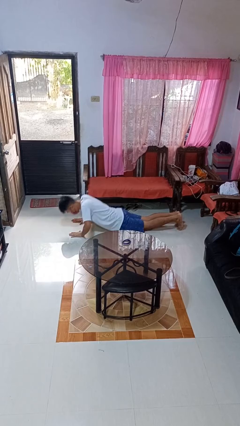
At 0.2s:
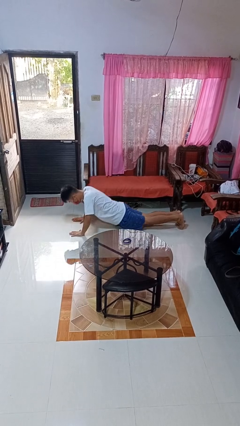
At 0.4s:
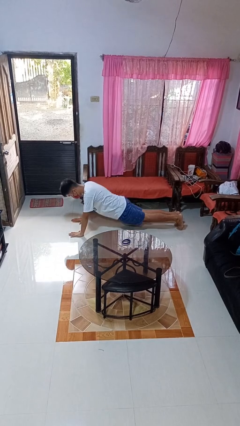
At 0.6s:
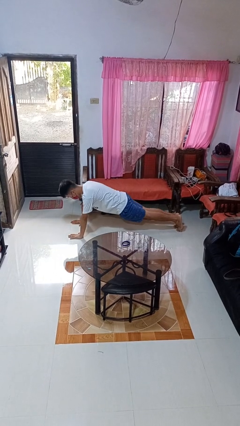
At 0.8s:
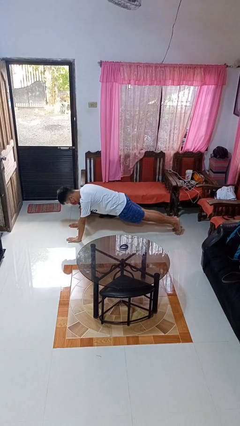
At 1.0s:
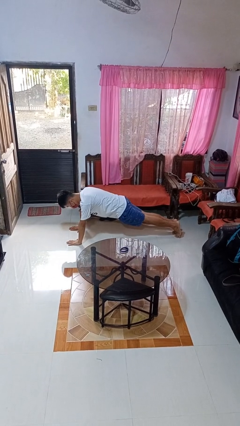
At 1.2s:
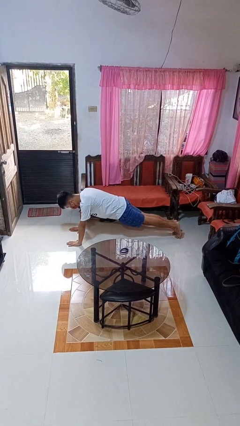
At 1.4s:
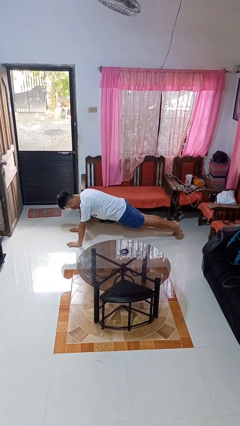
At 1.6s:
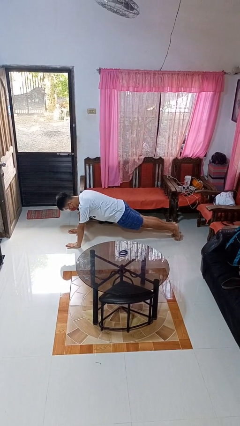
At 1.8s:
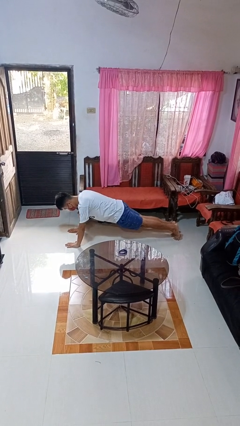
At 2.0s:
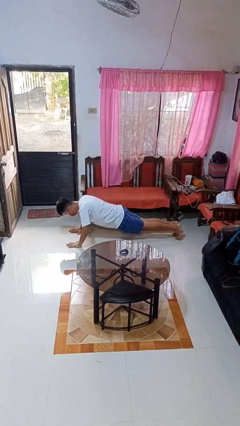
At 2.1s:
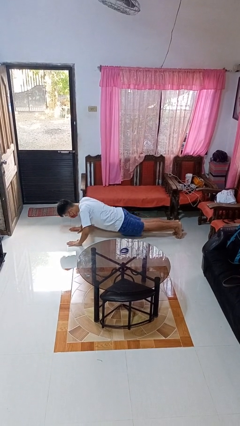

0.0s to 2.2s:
person exercises with pushup

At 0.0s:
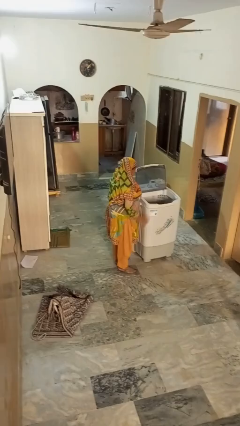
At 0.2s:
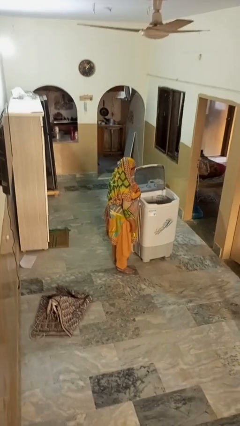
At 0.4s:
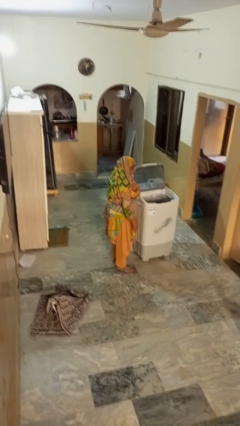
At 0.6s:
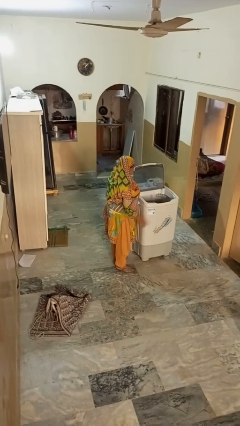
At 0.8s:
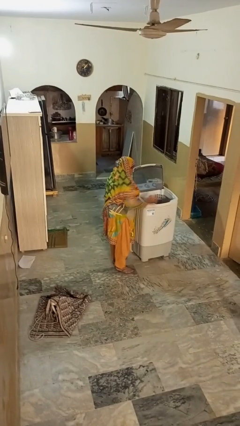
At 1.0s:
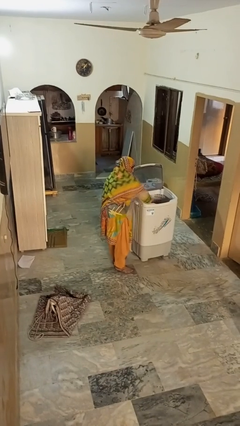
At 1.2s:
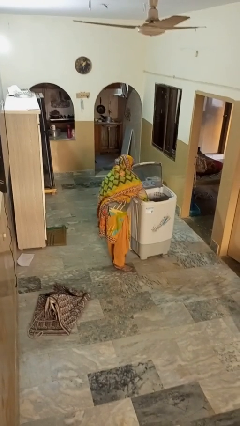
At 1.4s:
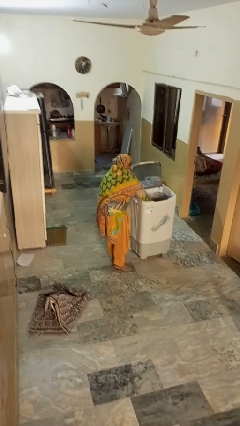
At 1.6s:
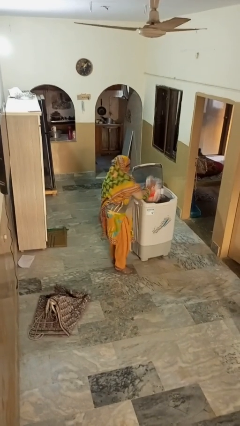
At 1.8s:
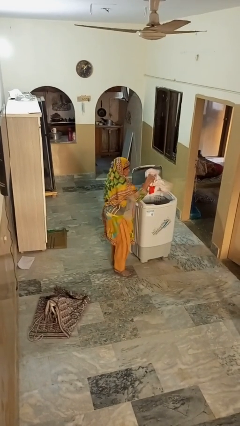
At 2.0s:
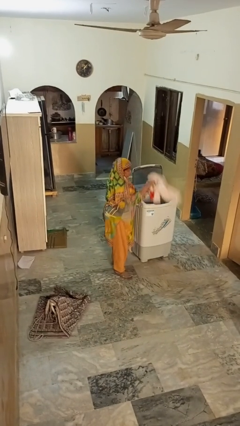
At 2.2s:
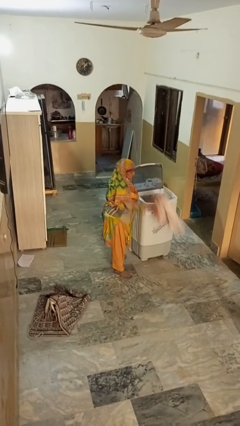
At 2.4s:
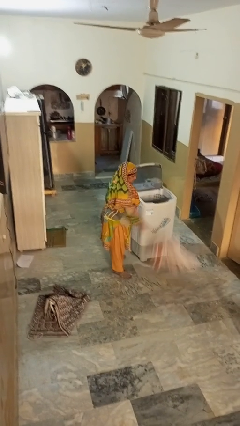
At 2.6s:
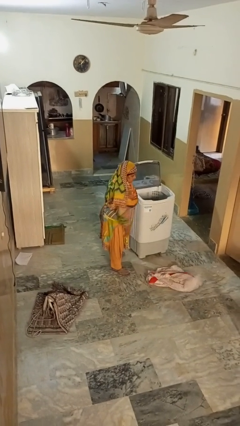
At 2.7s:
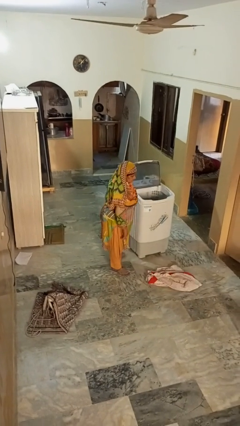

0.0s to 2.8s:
person unloads clotheswasher

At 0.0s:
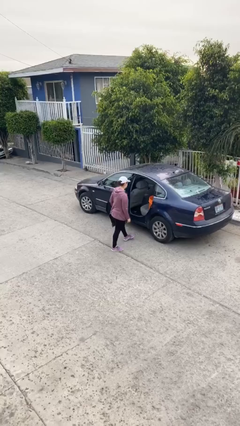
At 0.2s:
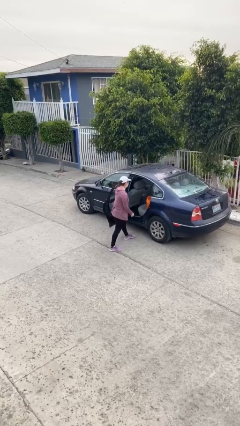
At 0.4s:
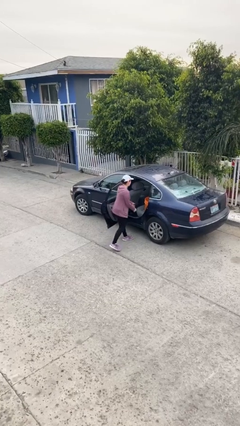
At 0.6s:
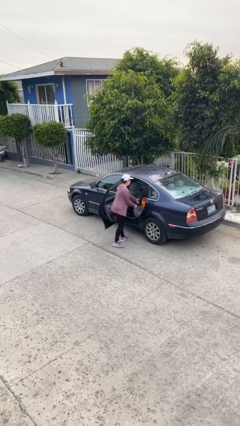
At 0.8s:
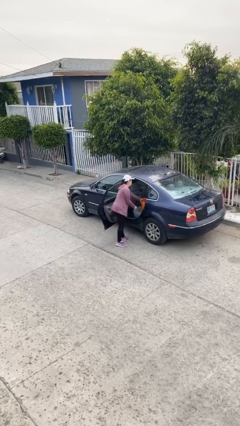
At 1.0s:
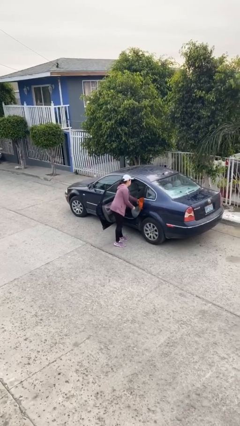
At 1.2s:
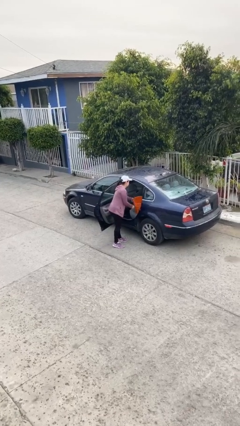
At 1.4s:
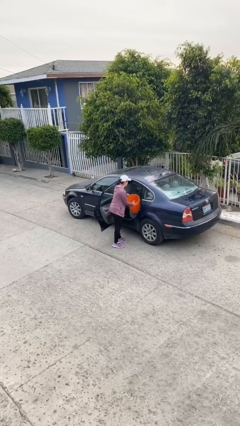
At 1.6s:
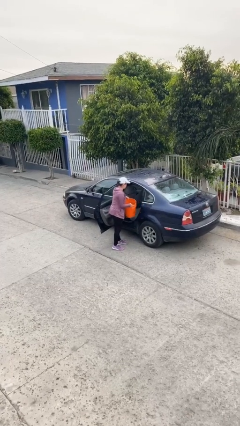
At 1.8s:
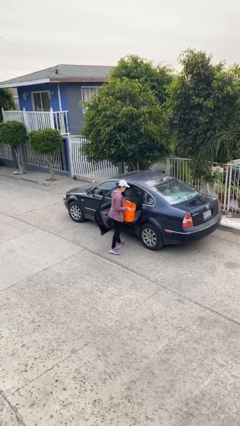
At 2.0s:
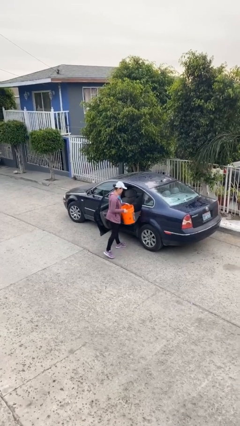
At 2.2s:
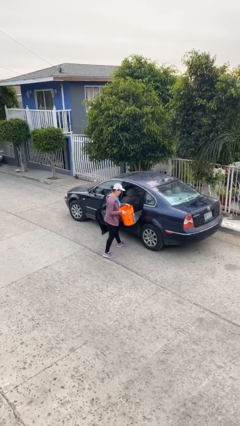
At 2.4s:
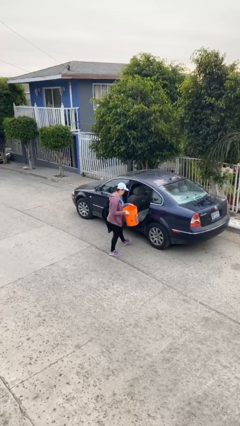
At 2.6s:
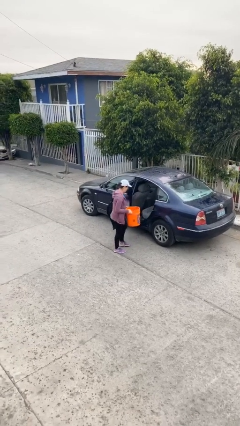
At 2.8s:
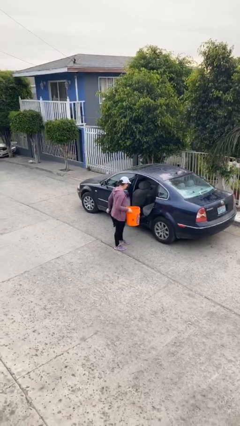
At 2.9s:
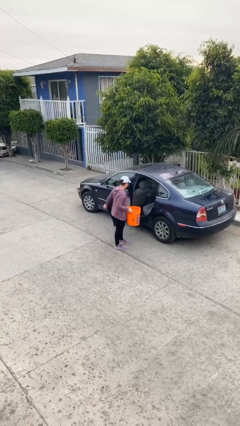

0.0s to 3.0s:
person unloads car

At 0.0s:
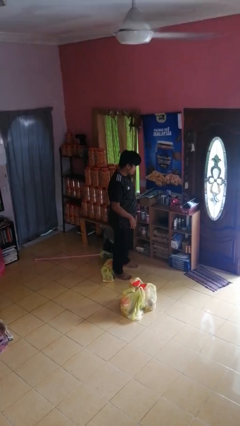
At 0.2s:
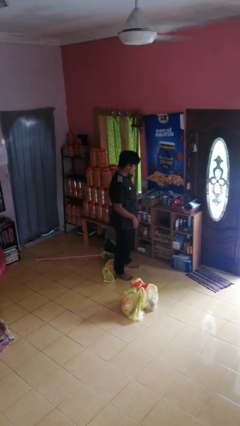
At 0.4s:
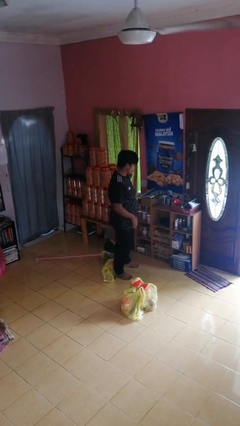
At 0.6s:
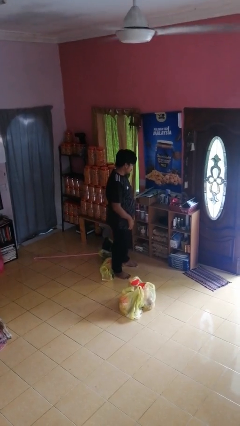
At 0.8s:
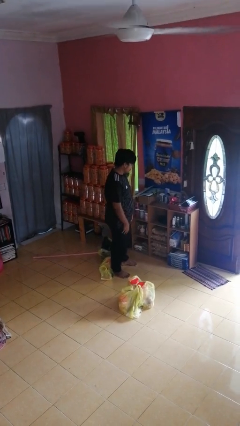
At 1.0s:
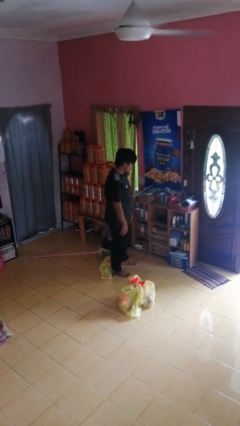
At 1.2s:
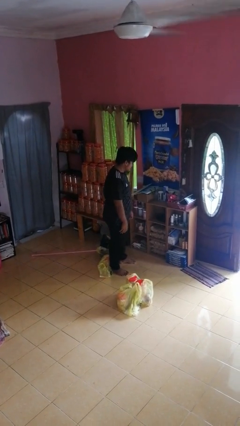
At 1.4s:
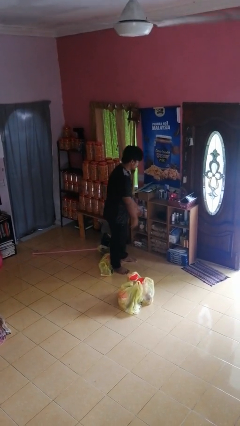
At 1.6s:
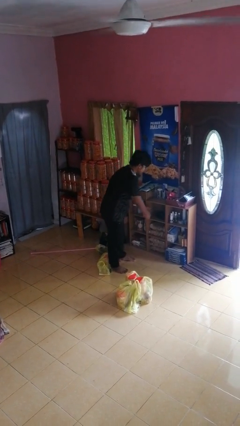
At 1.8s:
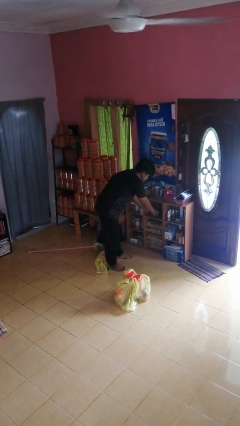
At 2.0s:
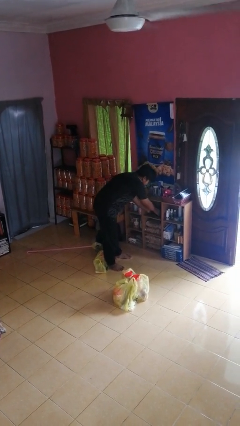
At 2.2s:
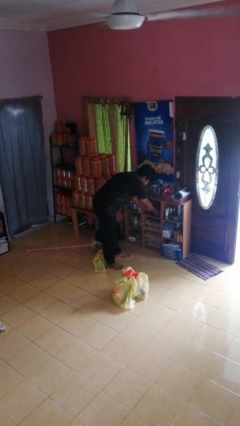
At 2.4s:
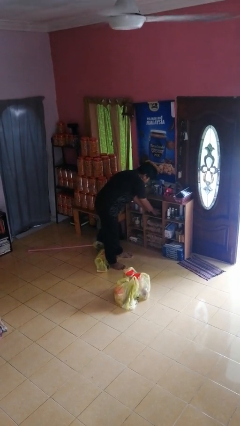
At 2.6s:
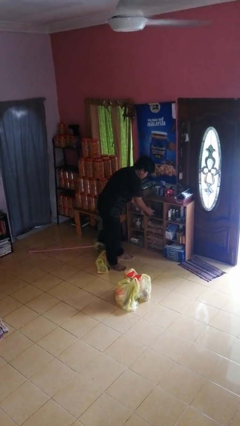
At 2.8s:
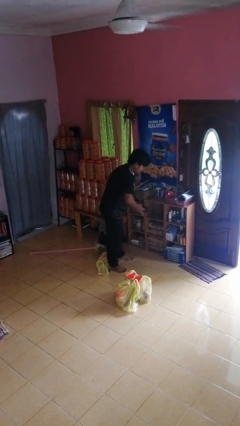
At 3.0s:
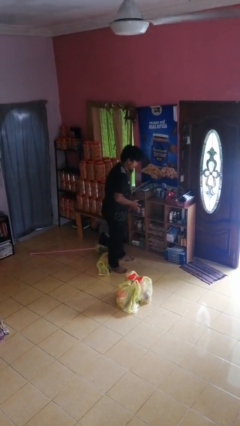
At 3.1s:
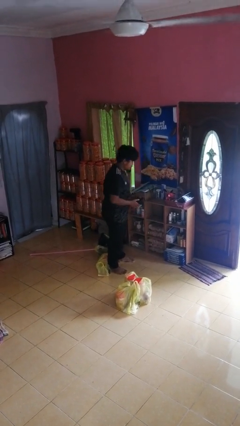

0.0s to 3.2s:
person takes object from cabinet

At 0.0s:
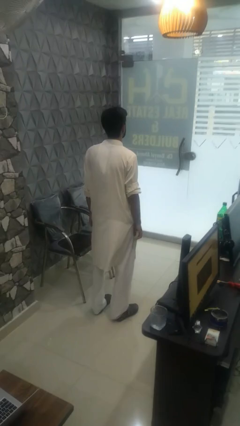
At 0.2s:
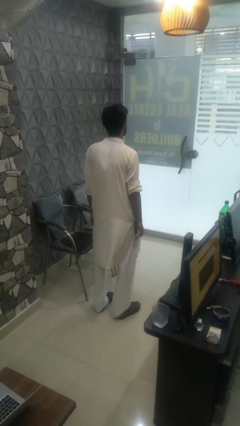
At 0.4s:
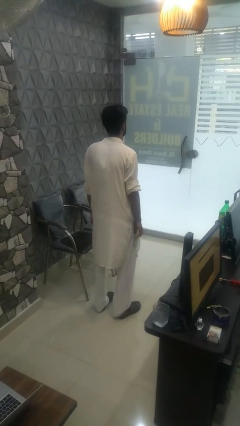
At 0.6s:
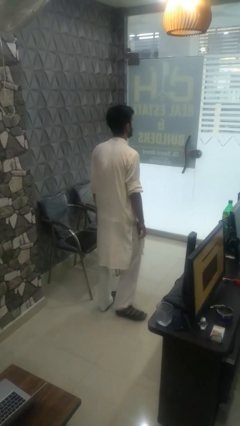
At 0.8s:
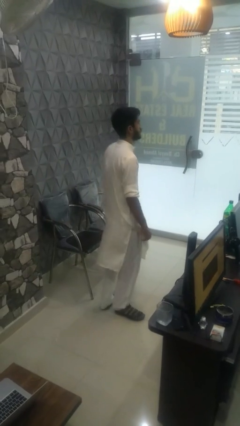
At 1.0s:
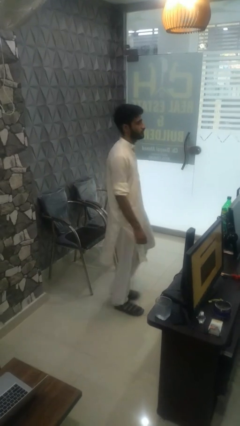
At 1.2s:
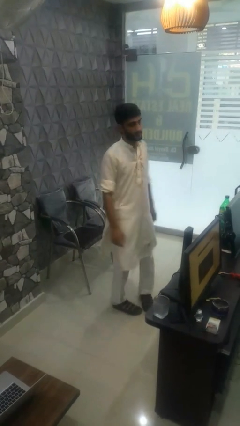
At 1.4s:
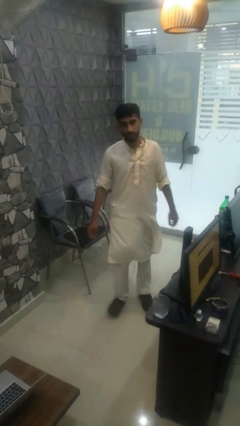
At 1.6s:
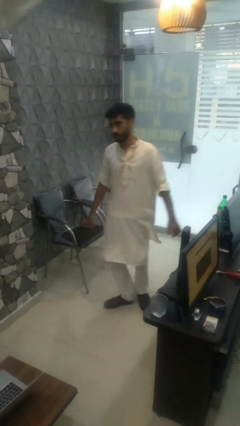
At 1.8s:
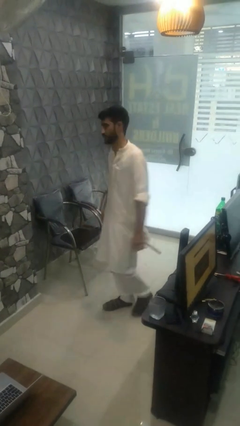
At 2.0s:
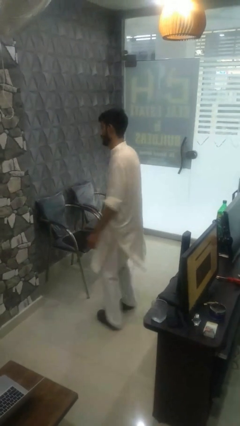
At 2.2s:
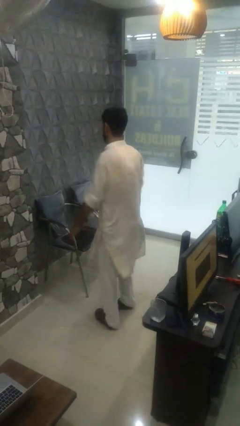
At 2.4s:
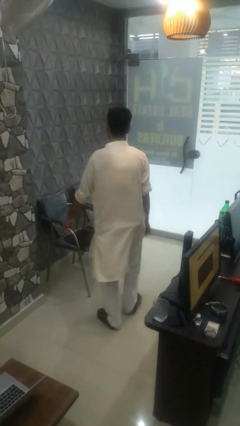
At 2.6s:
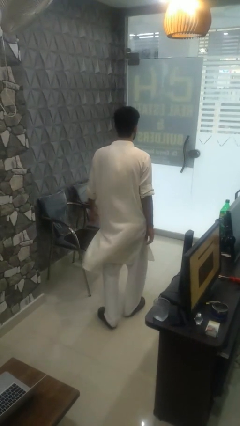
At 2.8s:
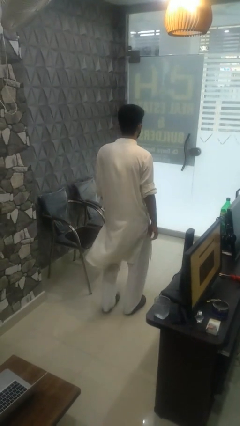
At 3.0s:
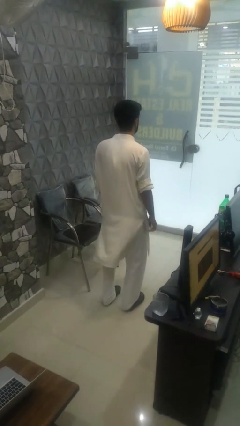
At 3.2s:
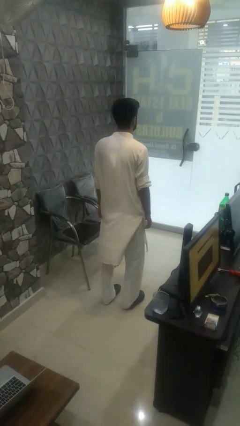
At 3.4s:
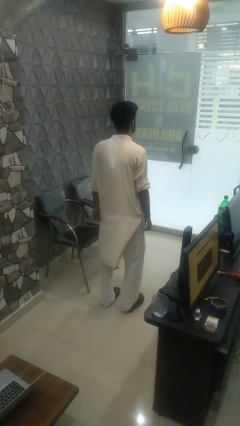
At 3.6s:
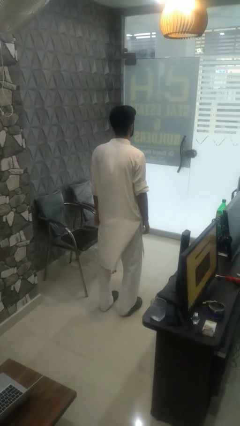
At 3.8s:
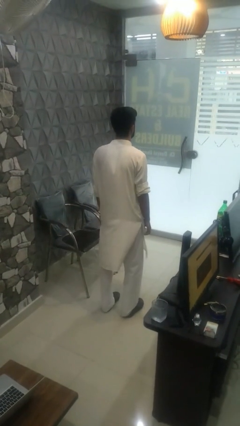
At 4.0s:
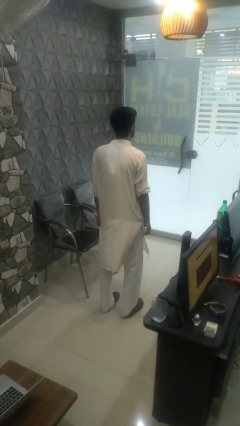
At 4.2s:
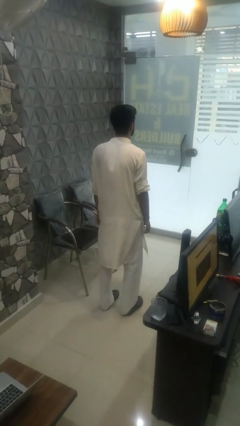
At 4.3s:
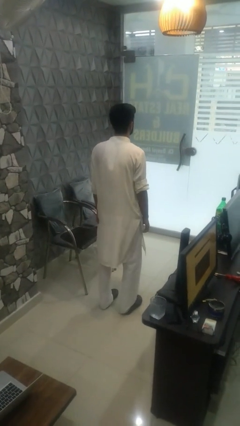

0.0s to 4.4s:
person twirls

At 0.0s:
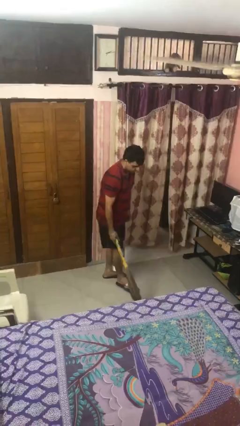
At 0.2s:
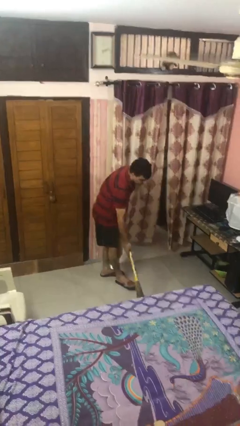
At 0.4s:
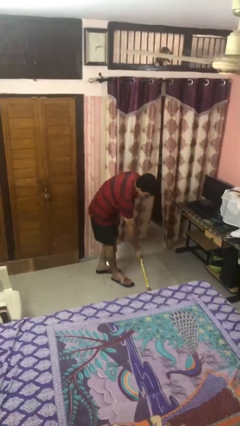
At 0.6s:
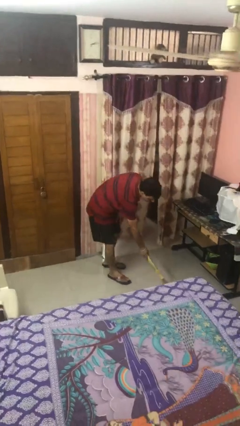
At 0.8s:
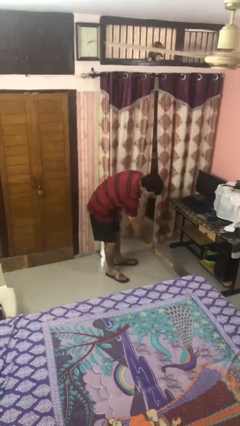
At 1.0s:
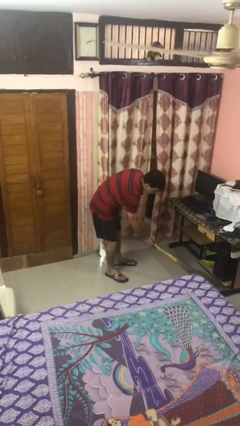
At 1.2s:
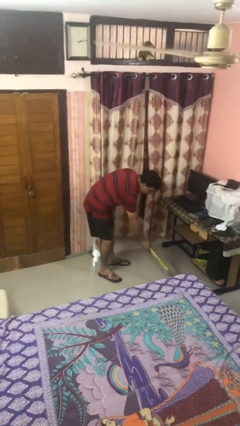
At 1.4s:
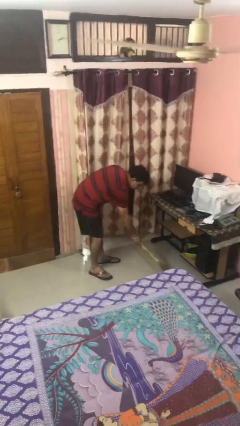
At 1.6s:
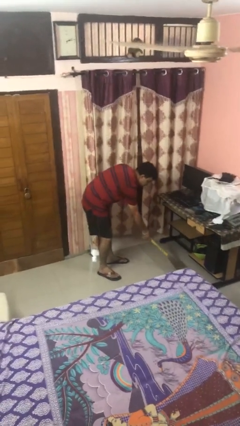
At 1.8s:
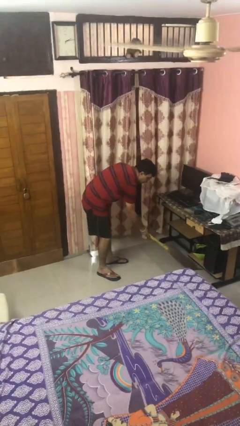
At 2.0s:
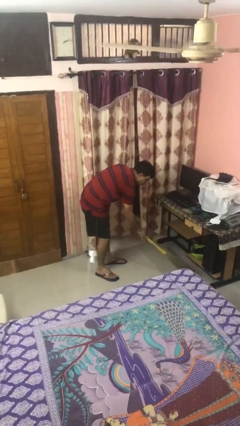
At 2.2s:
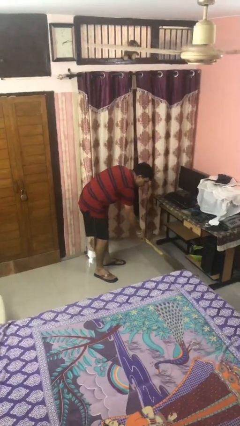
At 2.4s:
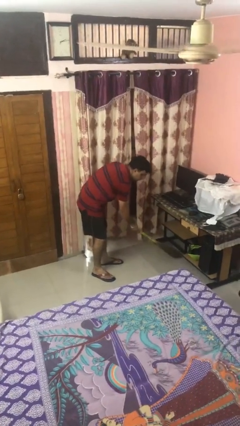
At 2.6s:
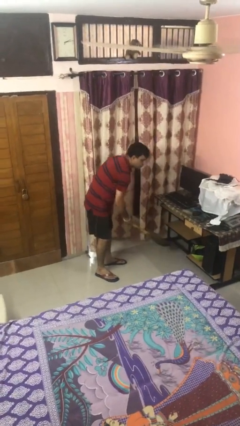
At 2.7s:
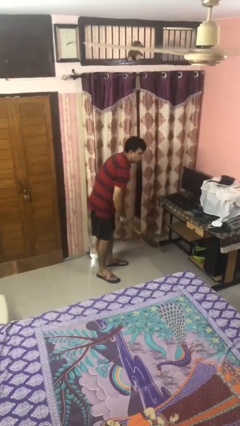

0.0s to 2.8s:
person sweeps floor
